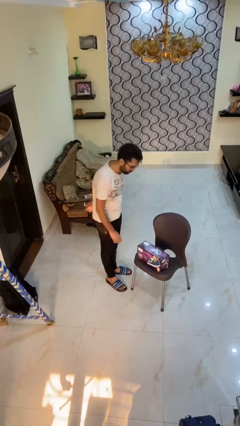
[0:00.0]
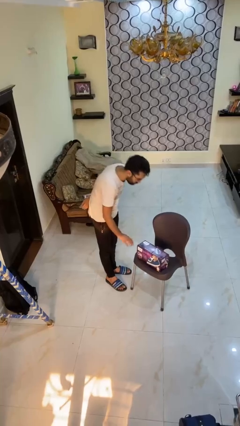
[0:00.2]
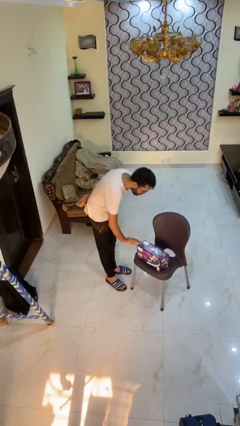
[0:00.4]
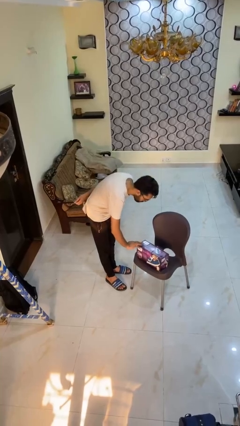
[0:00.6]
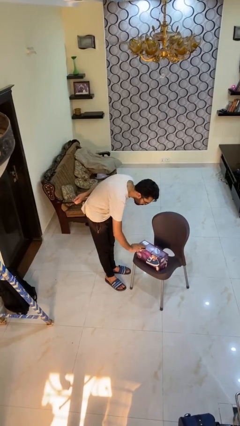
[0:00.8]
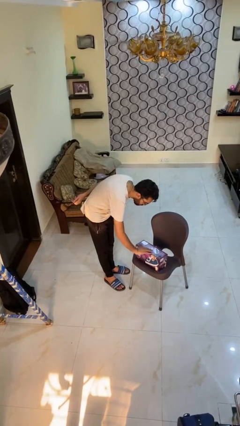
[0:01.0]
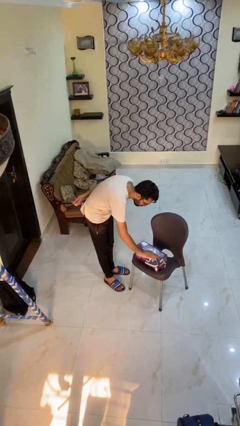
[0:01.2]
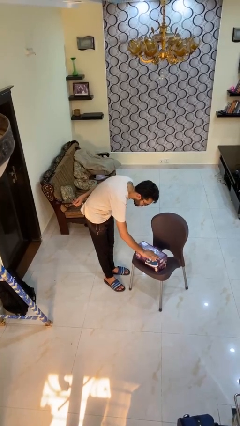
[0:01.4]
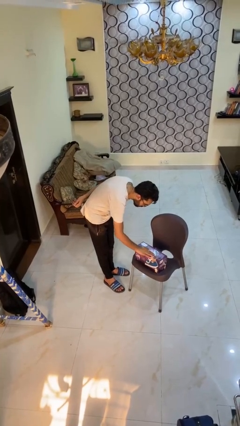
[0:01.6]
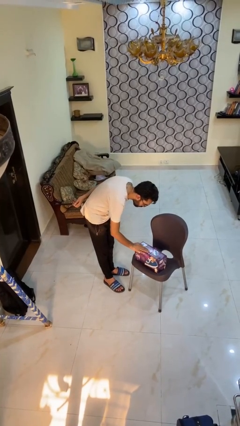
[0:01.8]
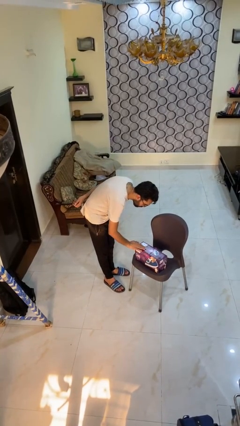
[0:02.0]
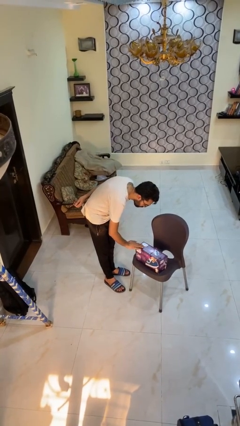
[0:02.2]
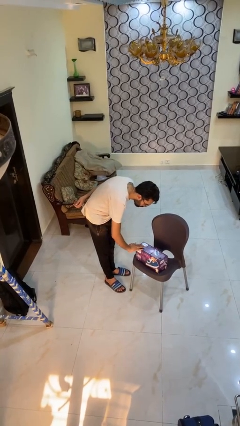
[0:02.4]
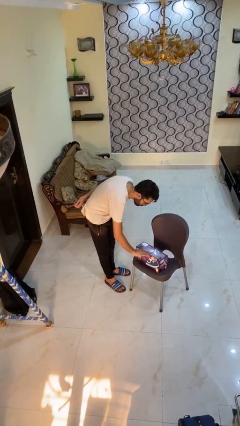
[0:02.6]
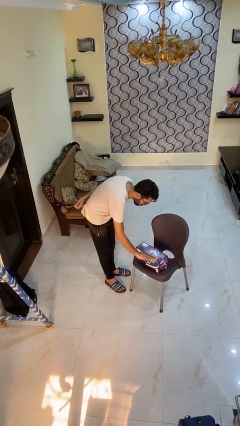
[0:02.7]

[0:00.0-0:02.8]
person waves hand over object

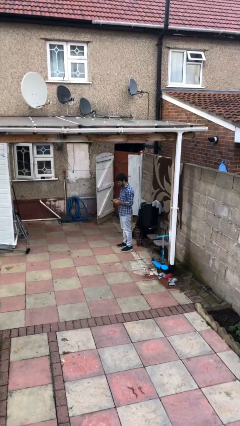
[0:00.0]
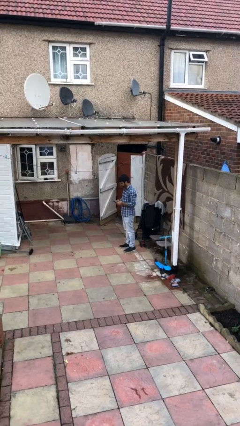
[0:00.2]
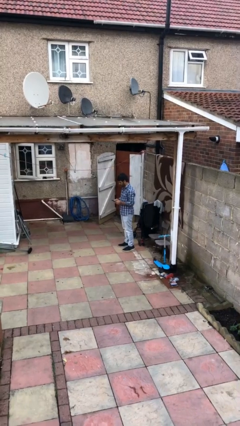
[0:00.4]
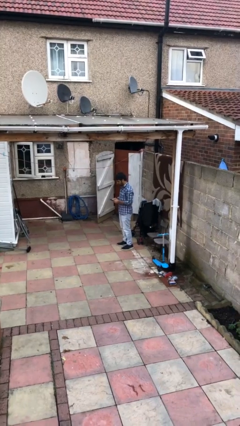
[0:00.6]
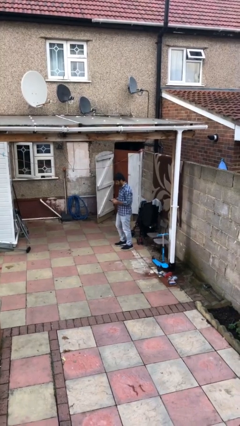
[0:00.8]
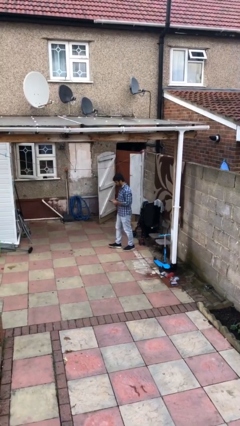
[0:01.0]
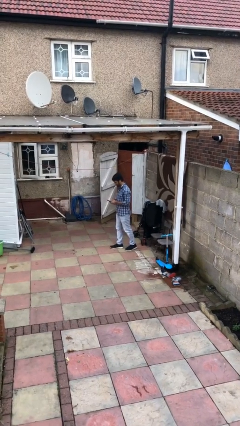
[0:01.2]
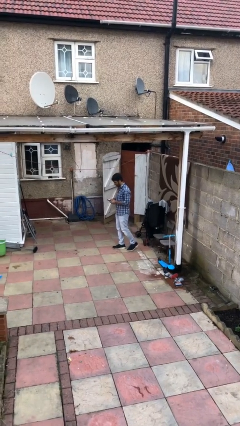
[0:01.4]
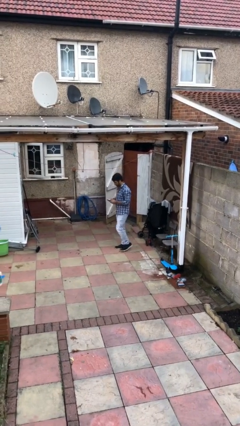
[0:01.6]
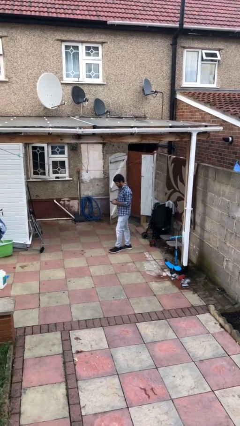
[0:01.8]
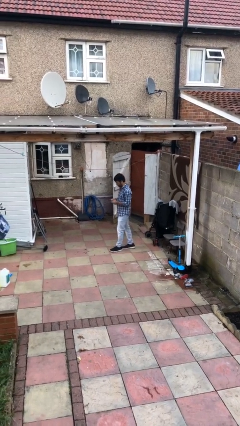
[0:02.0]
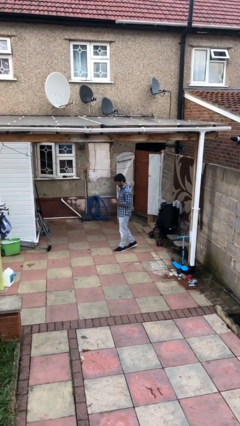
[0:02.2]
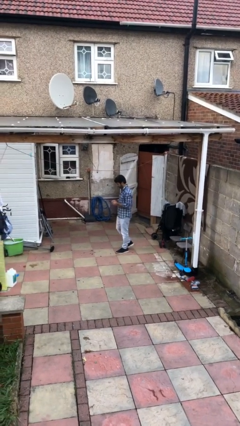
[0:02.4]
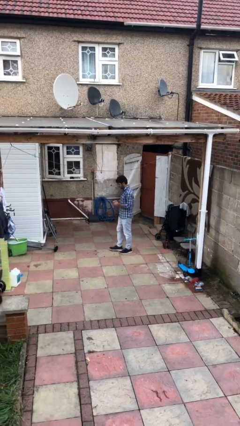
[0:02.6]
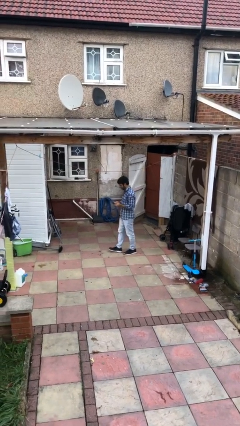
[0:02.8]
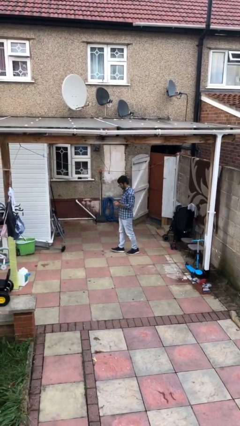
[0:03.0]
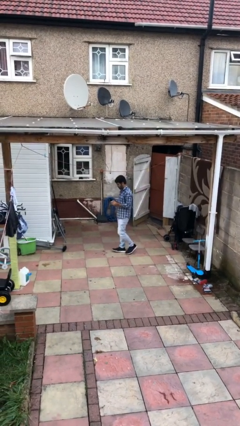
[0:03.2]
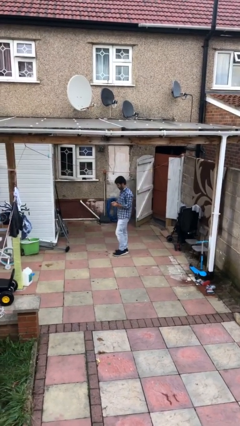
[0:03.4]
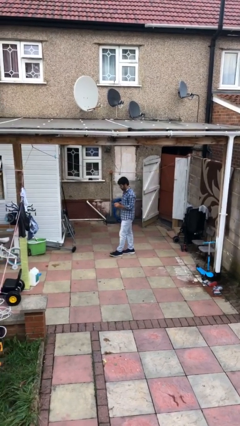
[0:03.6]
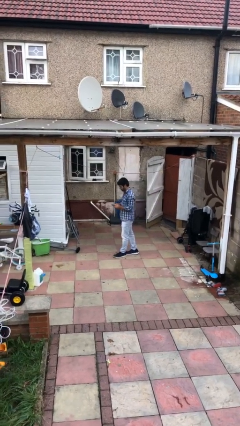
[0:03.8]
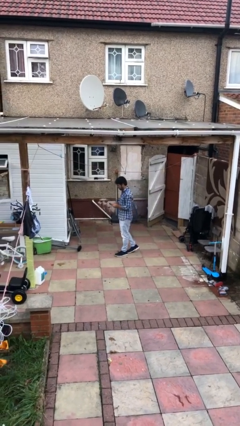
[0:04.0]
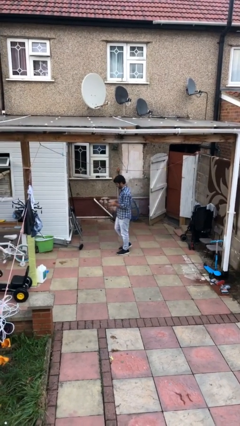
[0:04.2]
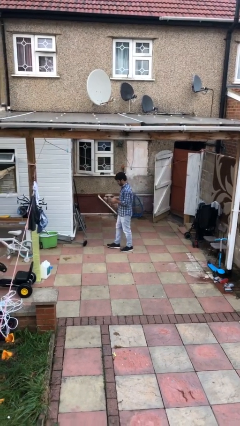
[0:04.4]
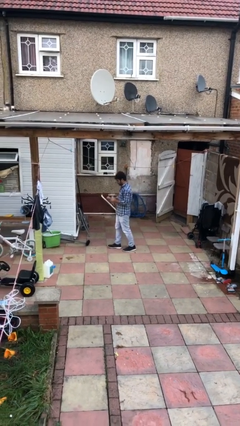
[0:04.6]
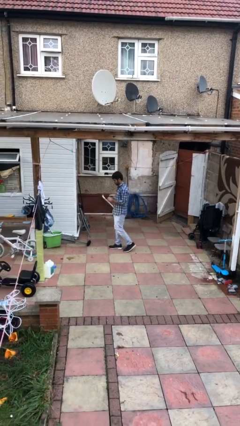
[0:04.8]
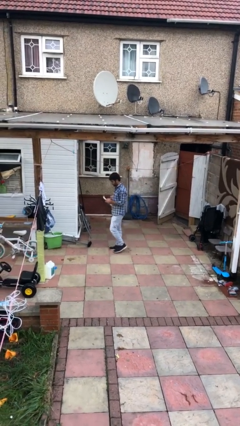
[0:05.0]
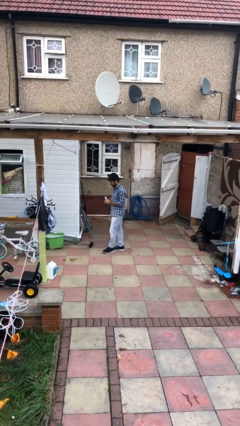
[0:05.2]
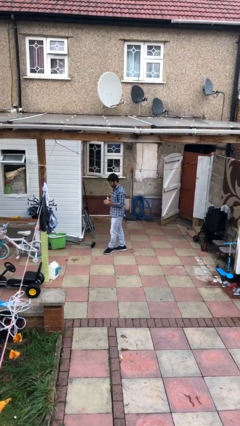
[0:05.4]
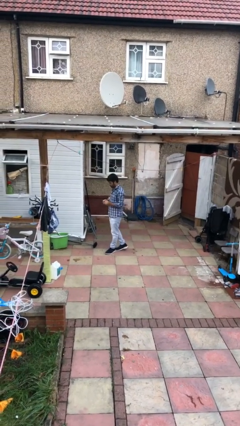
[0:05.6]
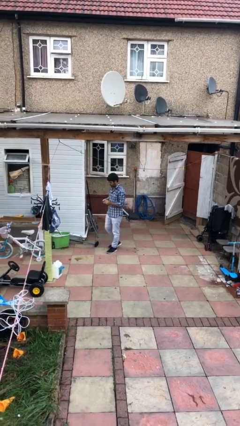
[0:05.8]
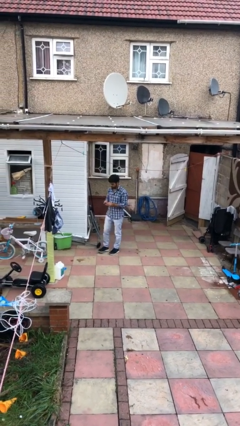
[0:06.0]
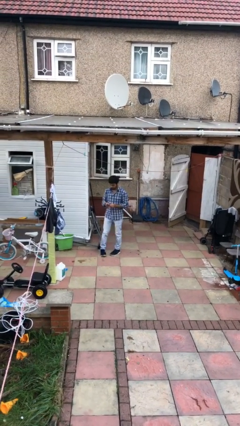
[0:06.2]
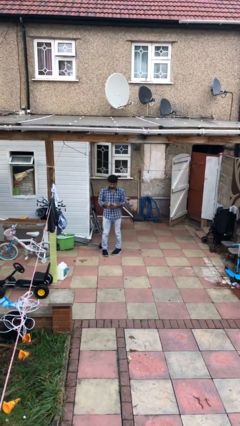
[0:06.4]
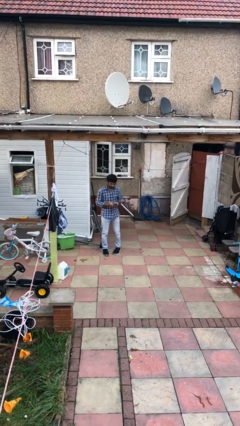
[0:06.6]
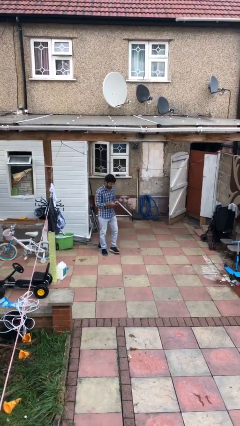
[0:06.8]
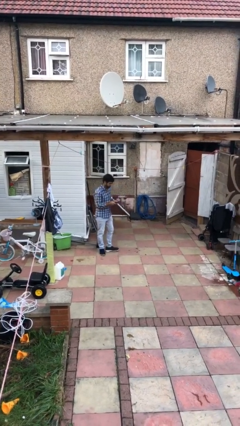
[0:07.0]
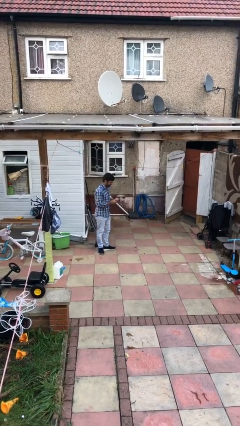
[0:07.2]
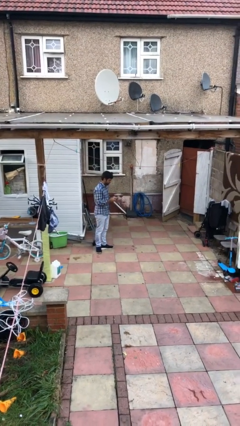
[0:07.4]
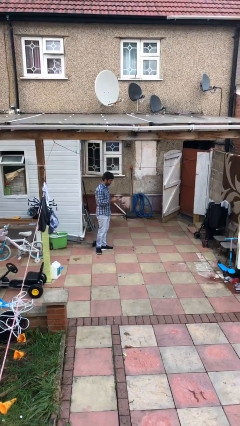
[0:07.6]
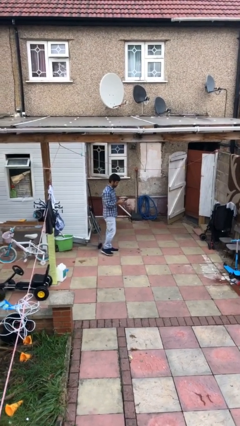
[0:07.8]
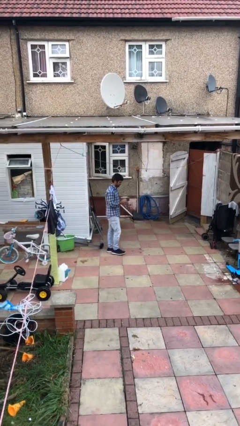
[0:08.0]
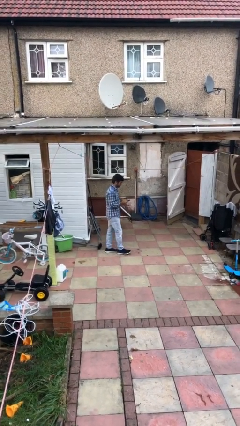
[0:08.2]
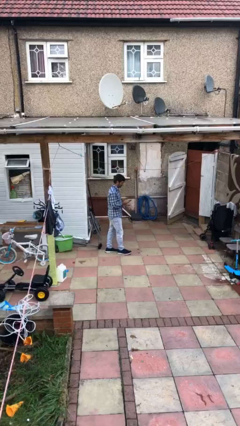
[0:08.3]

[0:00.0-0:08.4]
person texts on phone

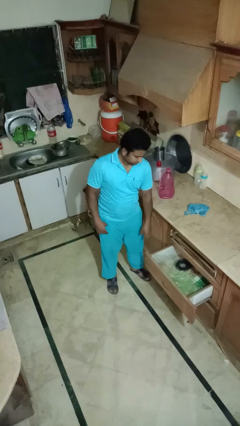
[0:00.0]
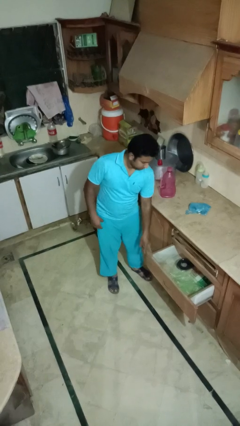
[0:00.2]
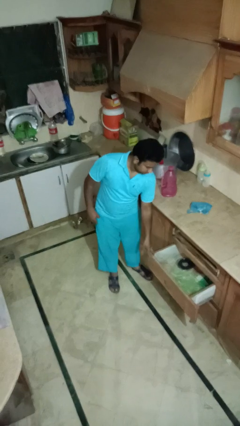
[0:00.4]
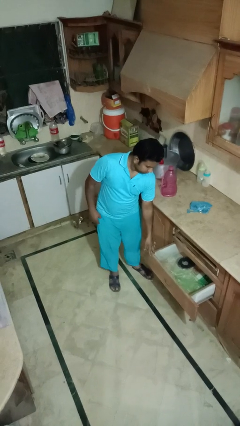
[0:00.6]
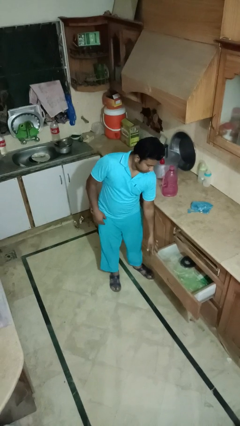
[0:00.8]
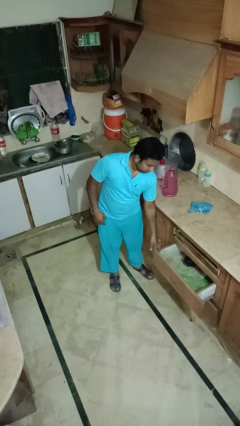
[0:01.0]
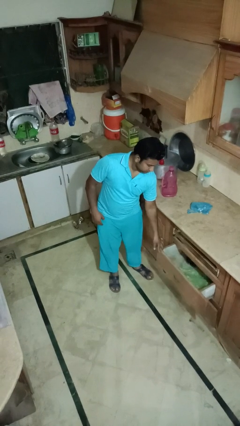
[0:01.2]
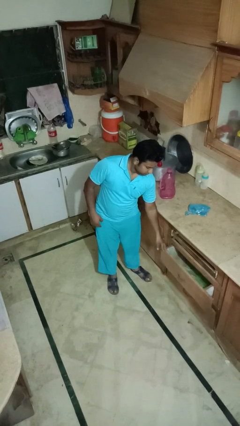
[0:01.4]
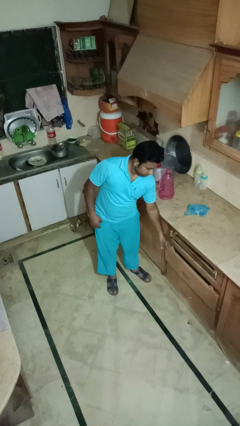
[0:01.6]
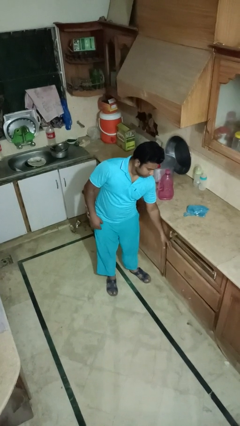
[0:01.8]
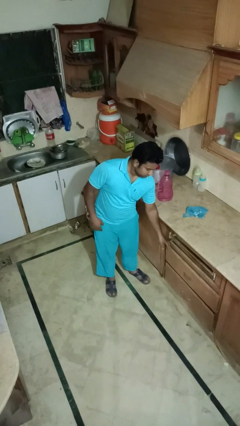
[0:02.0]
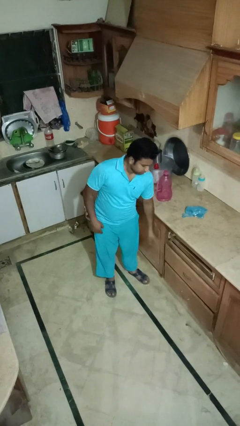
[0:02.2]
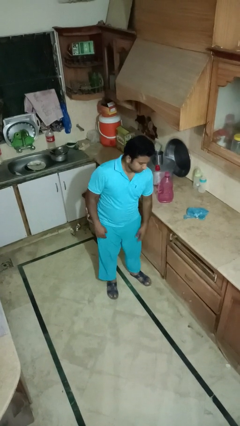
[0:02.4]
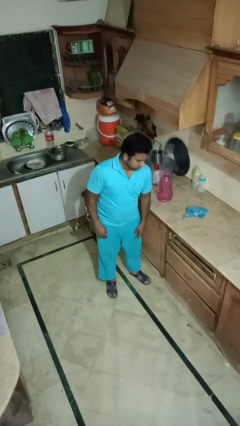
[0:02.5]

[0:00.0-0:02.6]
person closes kitchen drawer

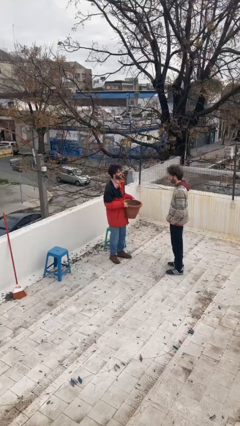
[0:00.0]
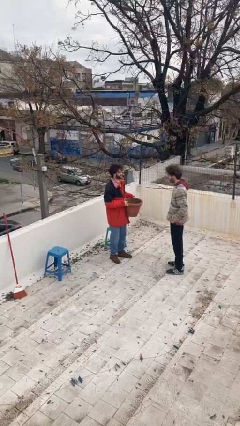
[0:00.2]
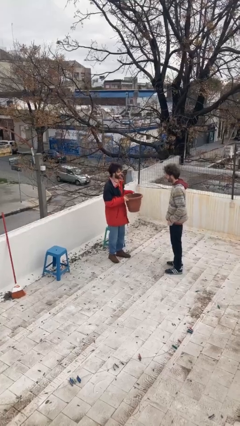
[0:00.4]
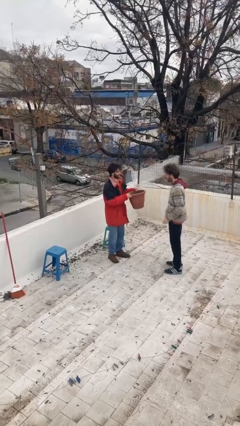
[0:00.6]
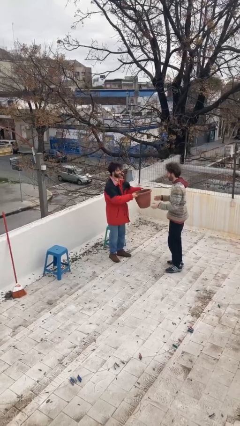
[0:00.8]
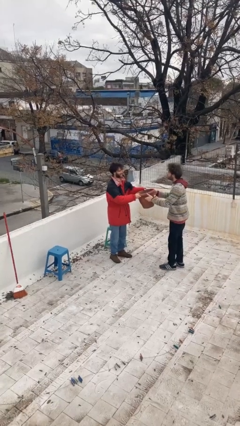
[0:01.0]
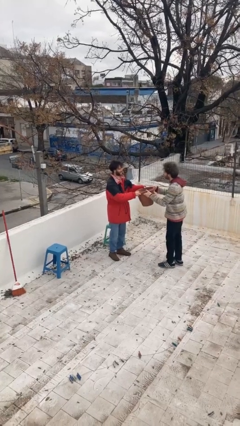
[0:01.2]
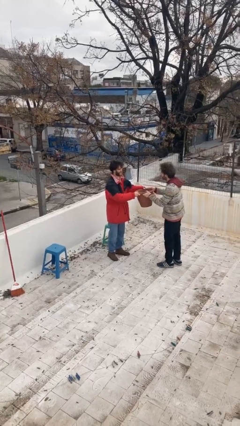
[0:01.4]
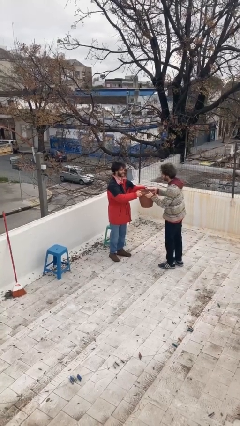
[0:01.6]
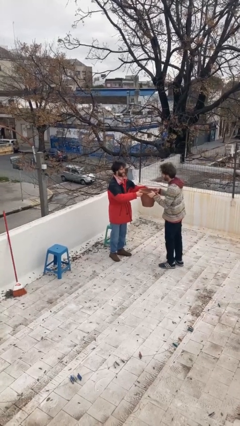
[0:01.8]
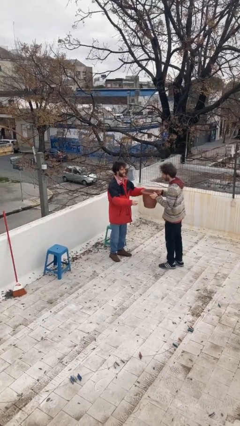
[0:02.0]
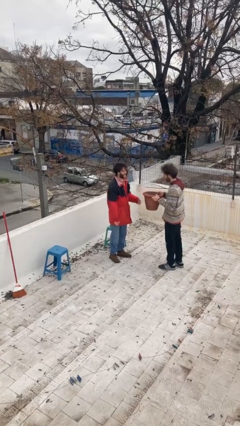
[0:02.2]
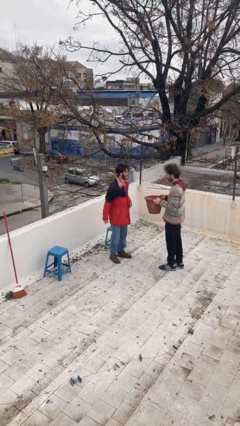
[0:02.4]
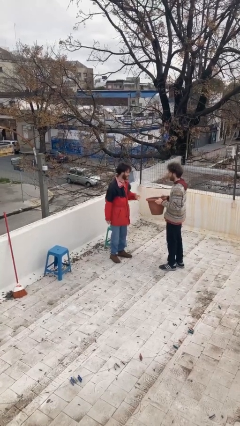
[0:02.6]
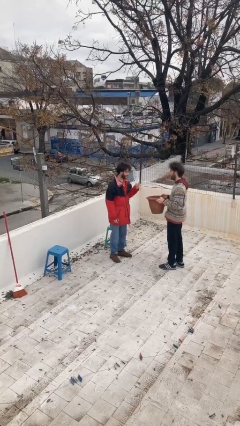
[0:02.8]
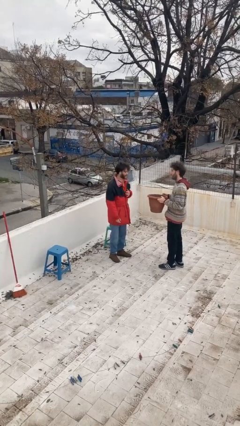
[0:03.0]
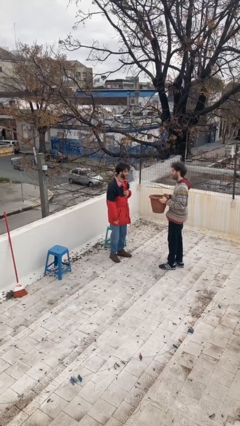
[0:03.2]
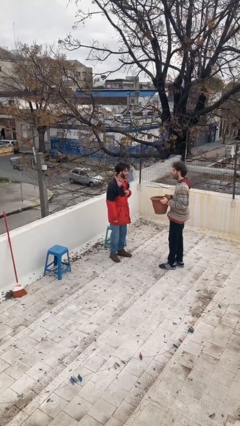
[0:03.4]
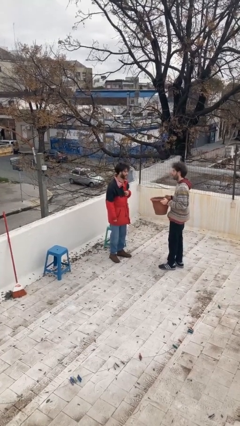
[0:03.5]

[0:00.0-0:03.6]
person transfers object to person
